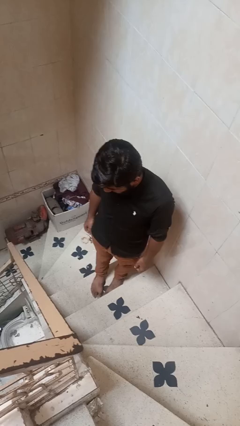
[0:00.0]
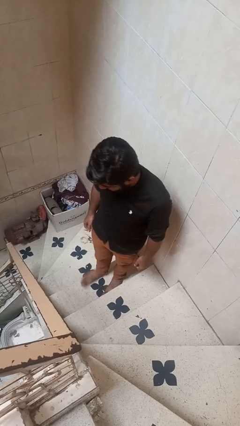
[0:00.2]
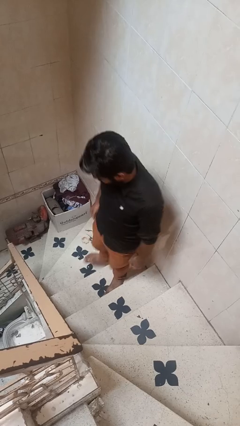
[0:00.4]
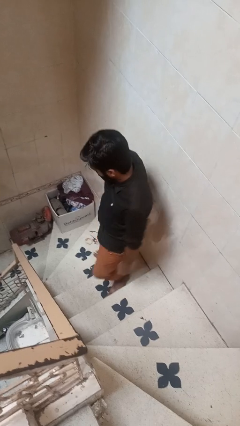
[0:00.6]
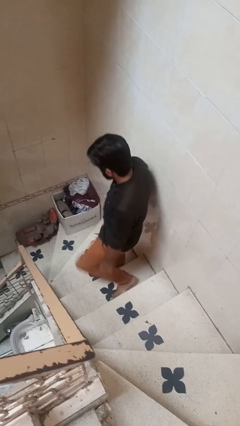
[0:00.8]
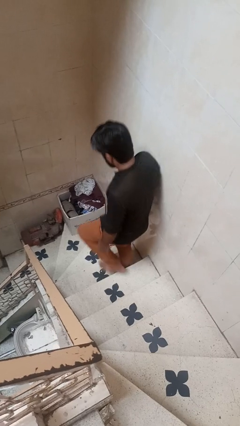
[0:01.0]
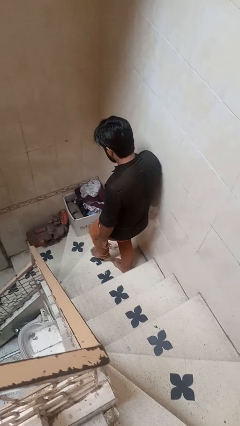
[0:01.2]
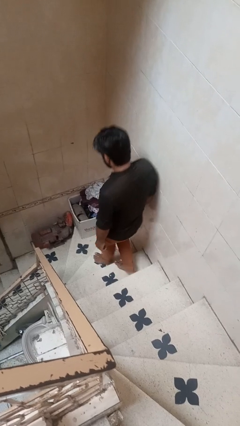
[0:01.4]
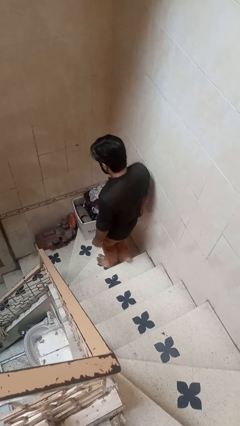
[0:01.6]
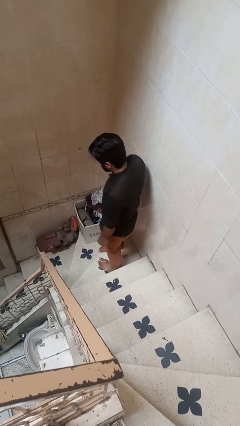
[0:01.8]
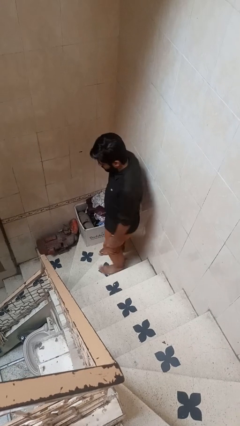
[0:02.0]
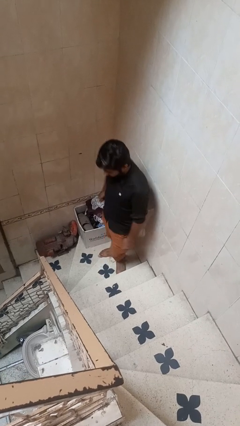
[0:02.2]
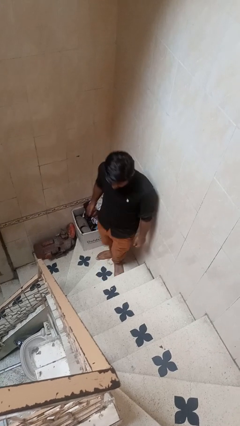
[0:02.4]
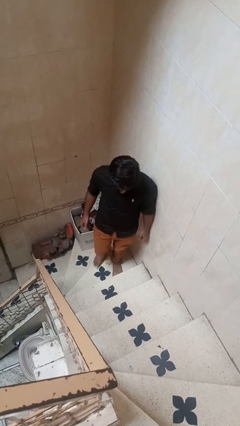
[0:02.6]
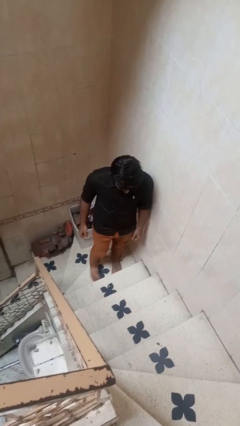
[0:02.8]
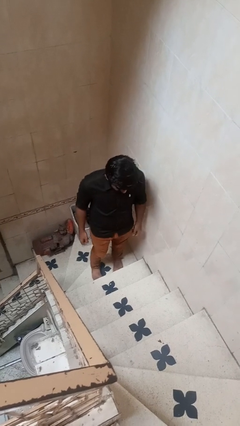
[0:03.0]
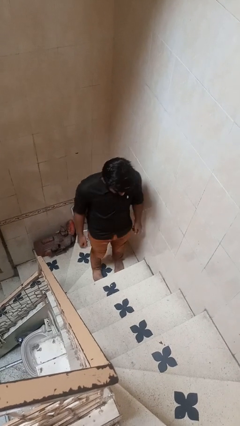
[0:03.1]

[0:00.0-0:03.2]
person climbs down stairs

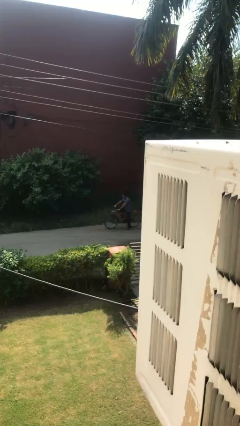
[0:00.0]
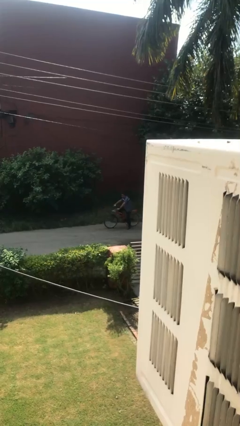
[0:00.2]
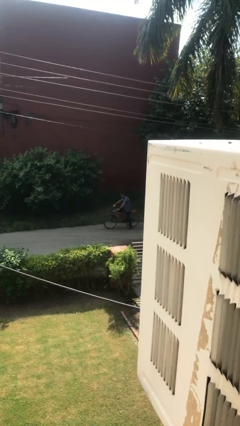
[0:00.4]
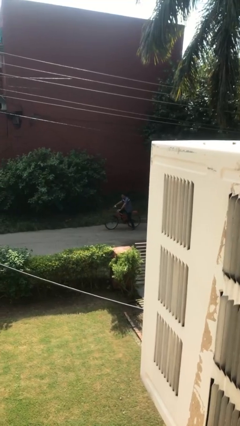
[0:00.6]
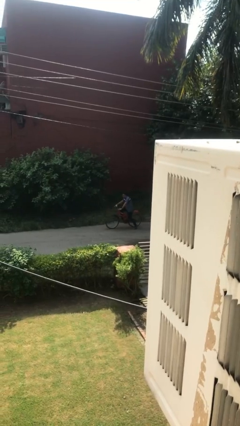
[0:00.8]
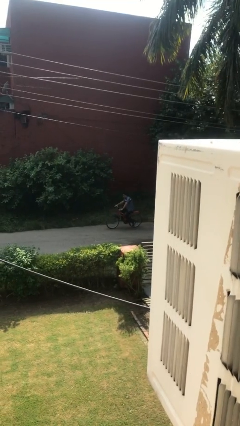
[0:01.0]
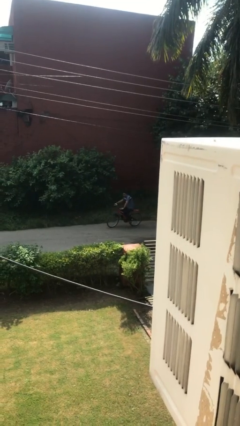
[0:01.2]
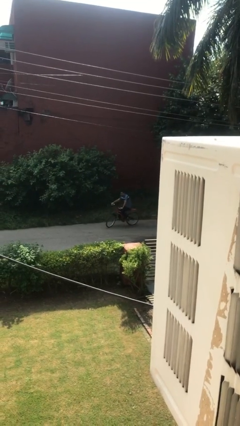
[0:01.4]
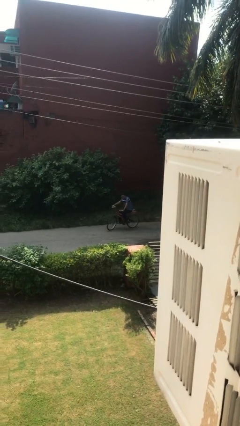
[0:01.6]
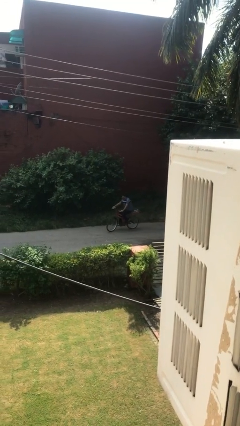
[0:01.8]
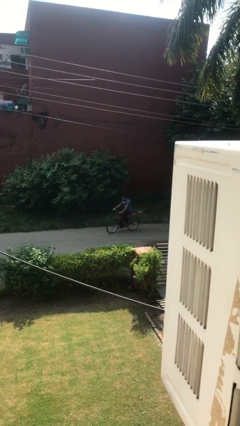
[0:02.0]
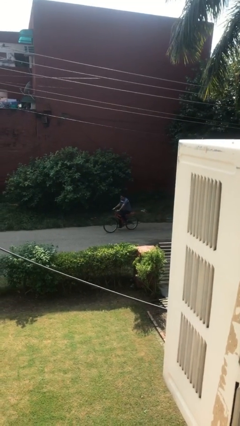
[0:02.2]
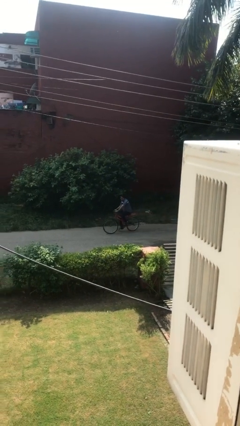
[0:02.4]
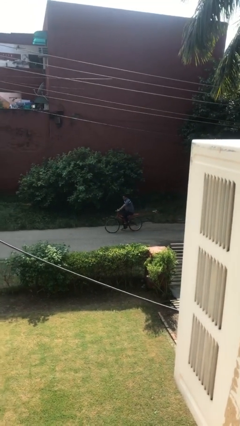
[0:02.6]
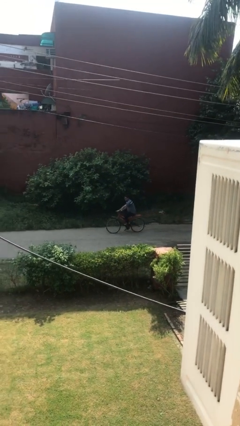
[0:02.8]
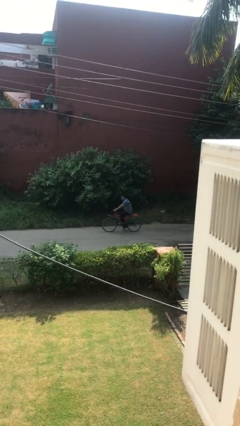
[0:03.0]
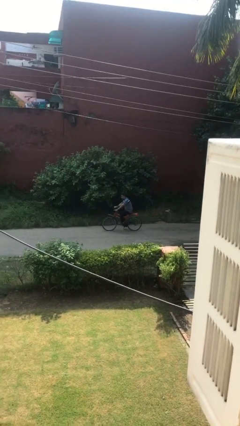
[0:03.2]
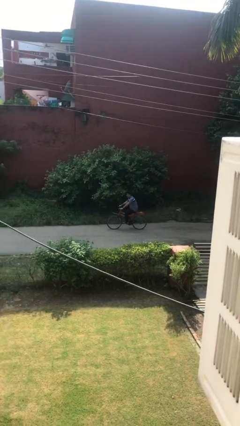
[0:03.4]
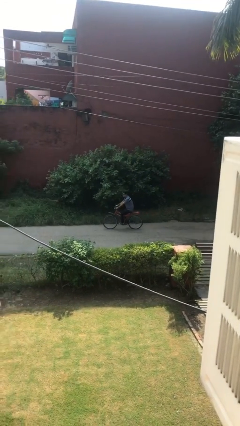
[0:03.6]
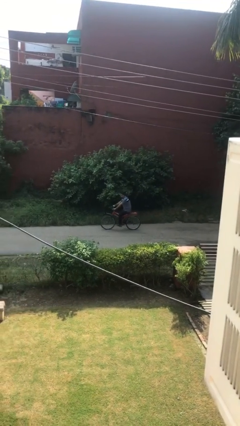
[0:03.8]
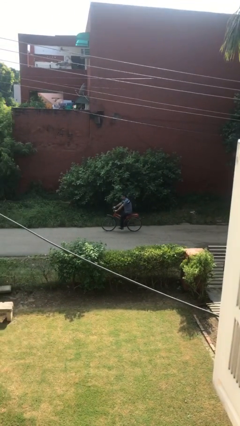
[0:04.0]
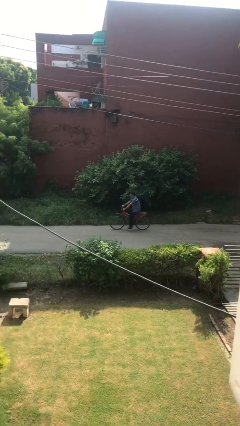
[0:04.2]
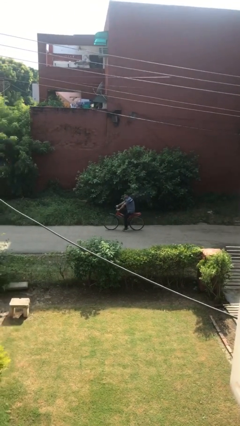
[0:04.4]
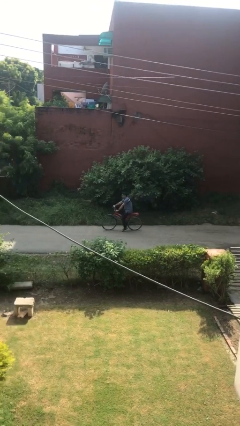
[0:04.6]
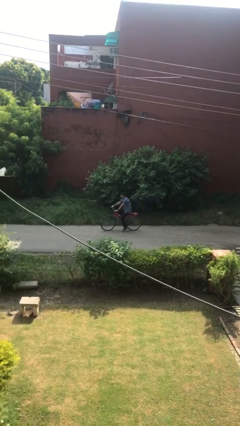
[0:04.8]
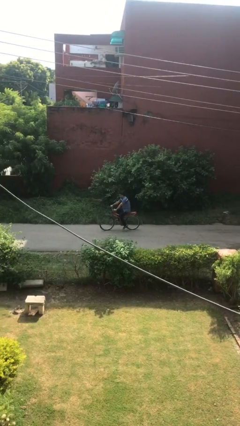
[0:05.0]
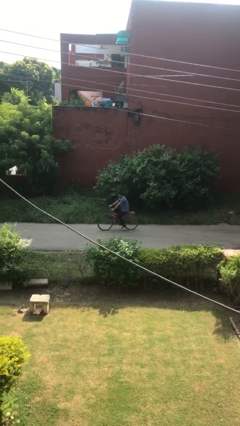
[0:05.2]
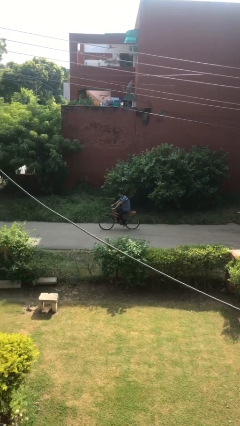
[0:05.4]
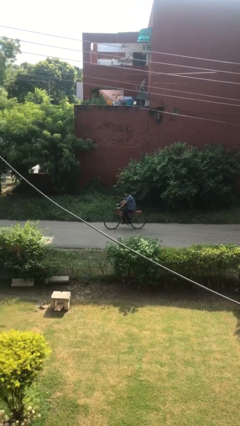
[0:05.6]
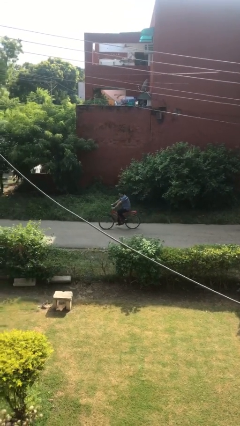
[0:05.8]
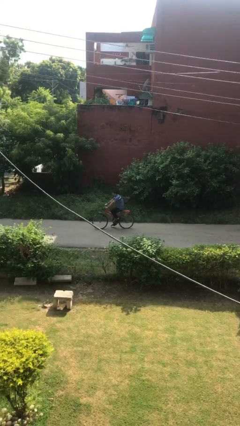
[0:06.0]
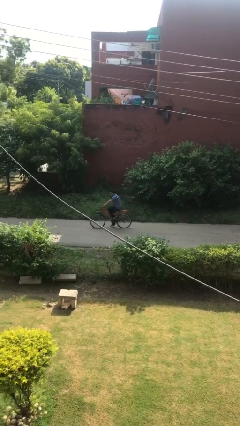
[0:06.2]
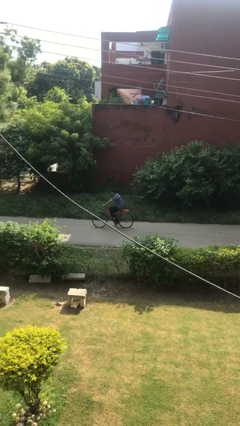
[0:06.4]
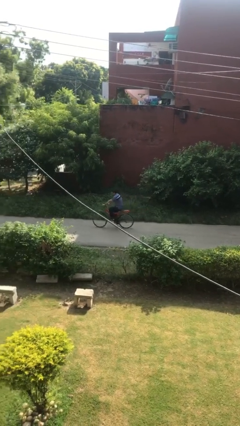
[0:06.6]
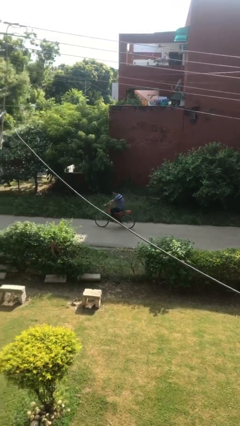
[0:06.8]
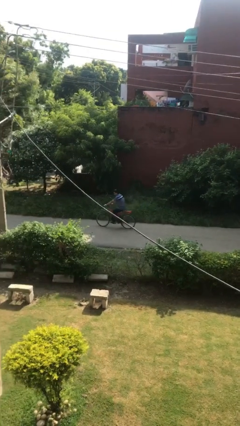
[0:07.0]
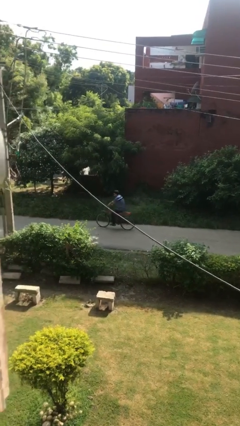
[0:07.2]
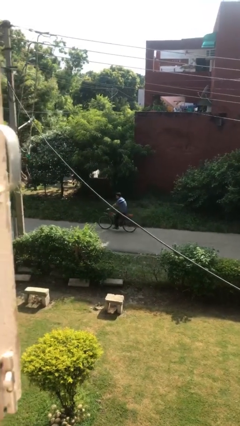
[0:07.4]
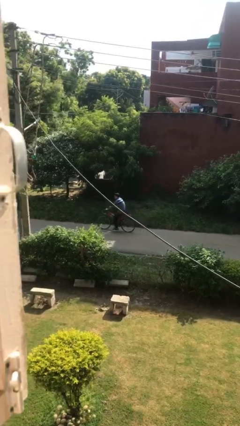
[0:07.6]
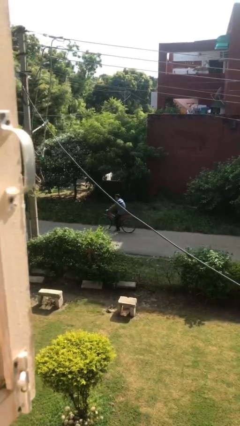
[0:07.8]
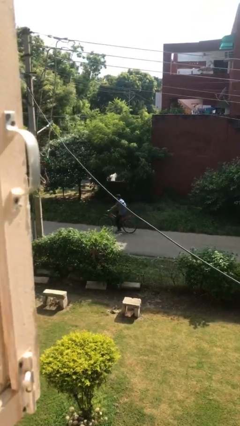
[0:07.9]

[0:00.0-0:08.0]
person rides bicycle

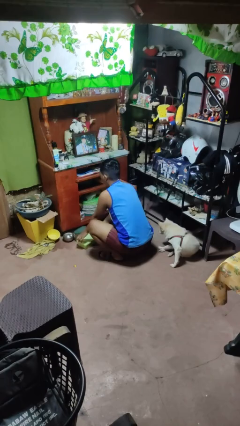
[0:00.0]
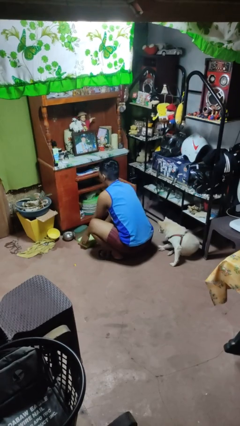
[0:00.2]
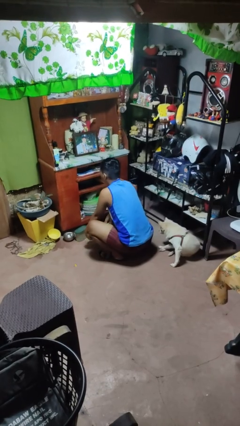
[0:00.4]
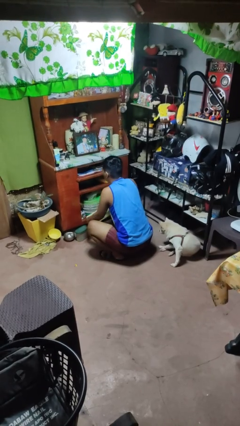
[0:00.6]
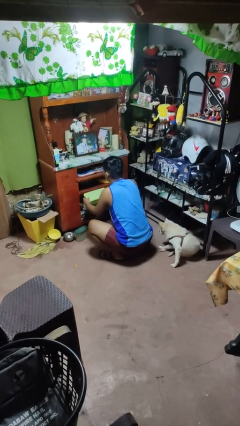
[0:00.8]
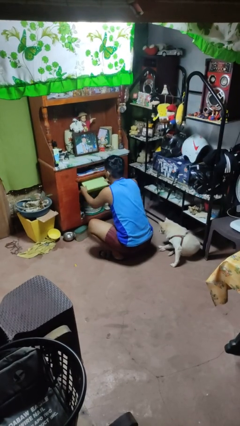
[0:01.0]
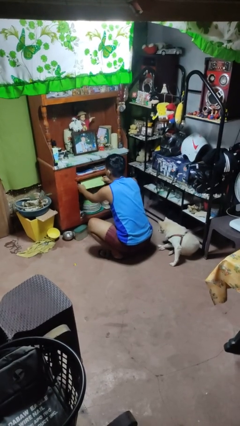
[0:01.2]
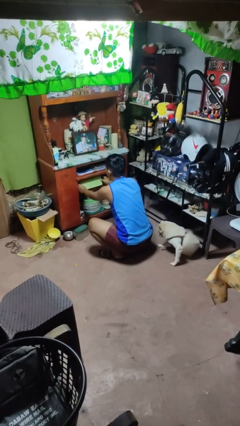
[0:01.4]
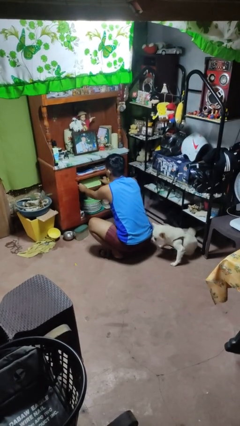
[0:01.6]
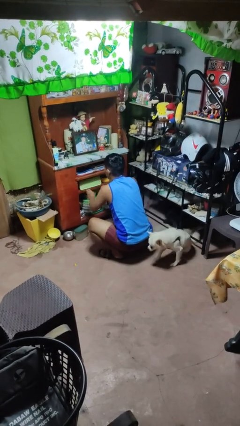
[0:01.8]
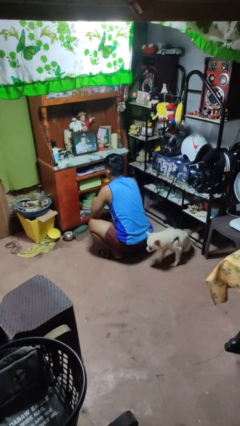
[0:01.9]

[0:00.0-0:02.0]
person puts object in cabinet

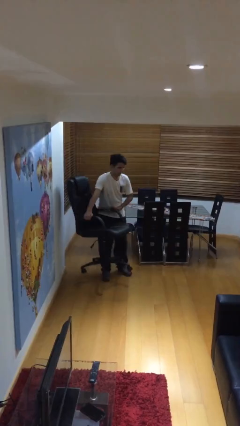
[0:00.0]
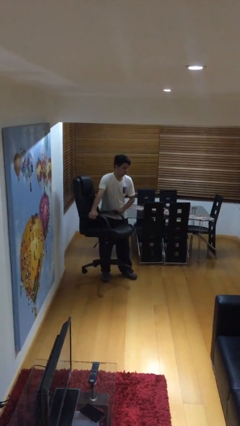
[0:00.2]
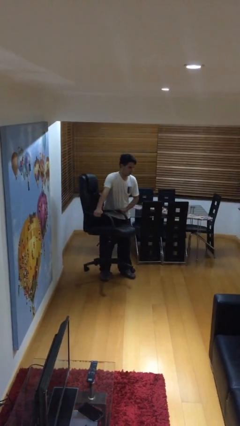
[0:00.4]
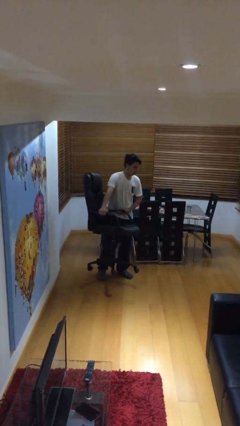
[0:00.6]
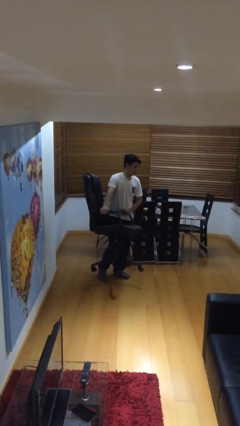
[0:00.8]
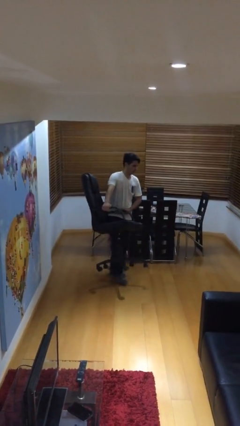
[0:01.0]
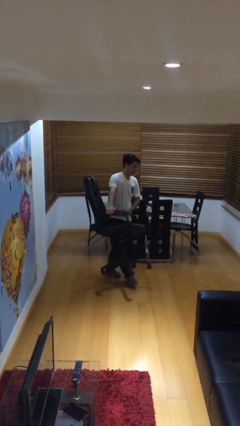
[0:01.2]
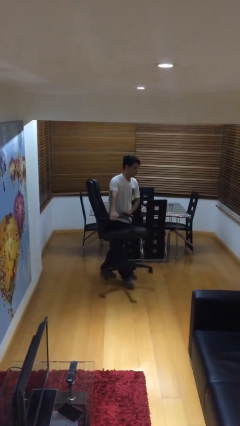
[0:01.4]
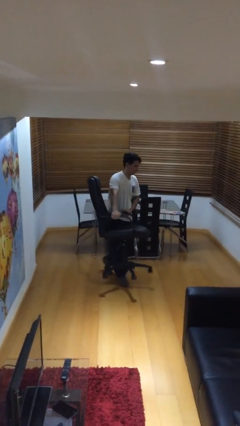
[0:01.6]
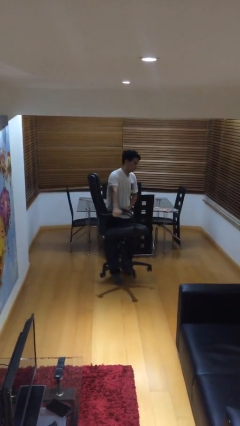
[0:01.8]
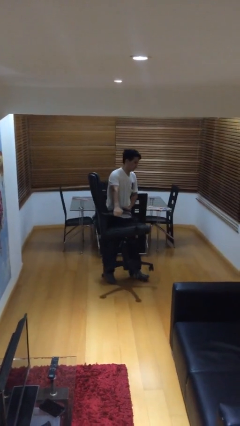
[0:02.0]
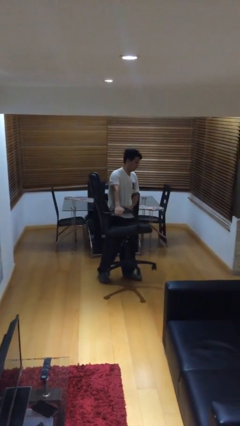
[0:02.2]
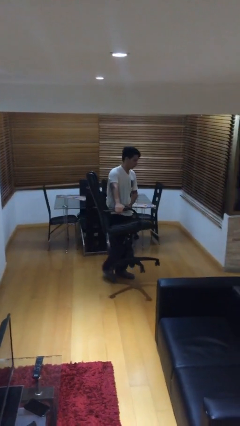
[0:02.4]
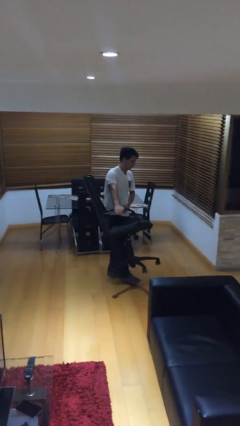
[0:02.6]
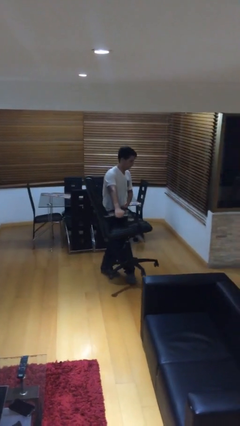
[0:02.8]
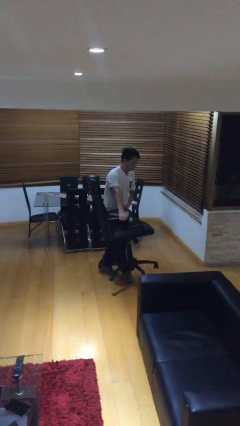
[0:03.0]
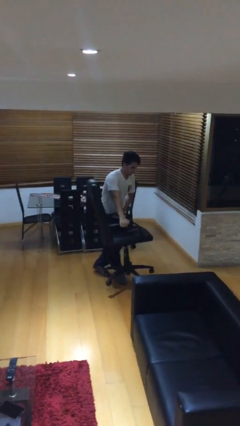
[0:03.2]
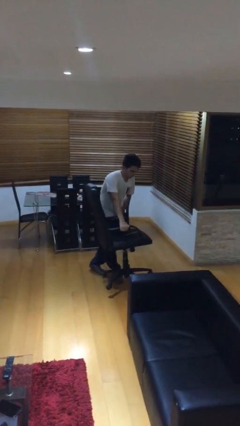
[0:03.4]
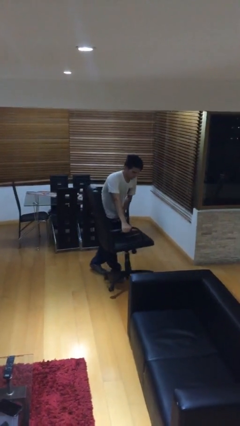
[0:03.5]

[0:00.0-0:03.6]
person carries heavy object

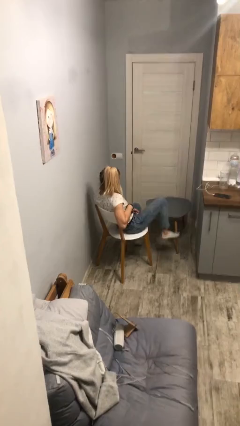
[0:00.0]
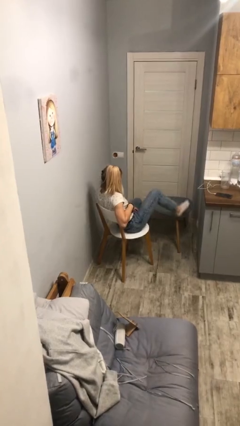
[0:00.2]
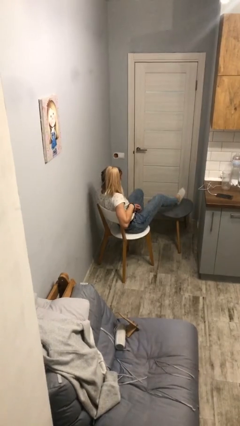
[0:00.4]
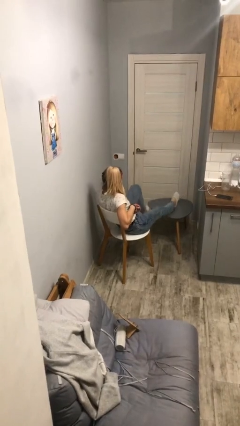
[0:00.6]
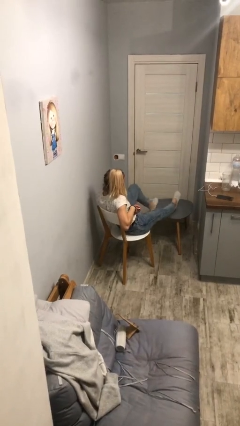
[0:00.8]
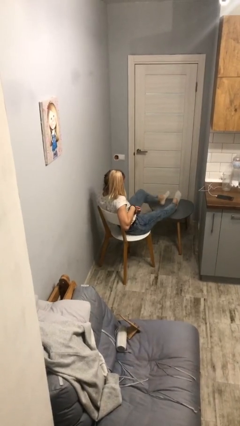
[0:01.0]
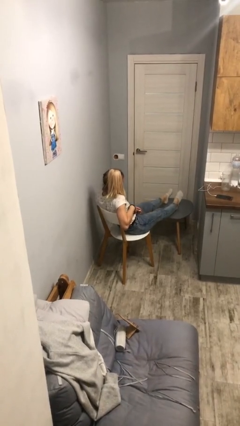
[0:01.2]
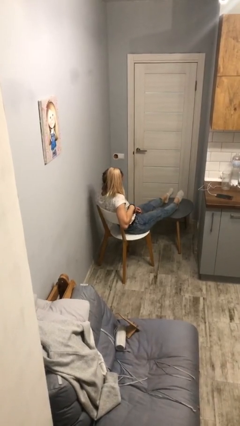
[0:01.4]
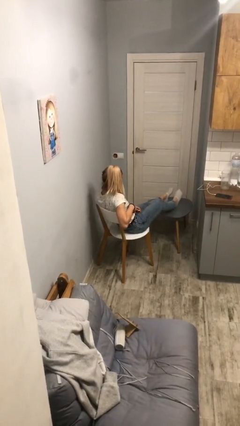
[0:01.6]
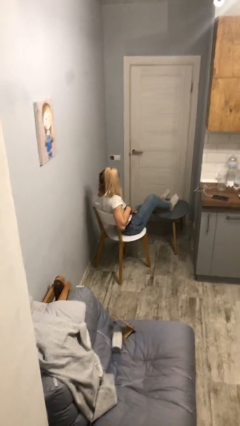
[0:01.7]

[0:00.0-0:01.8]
person puts feet up
